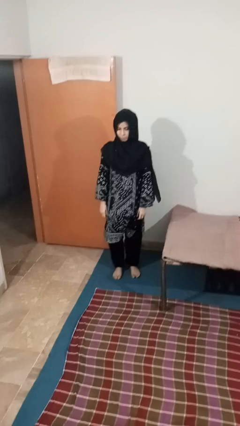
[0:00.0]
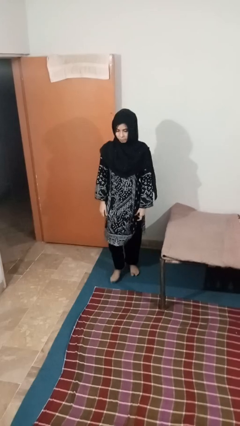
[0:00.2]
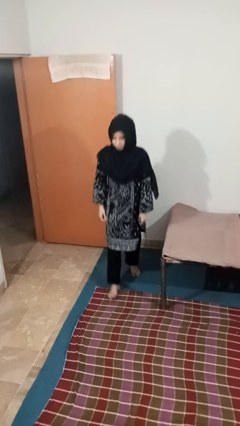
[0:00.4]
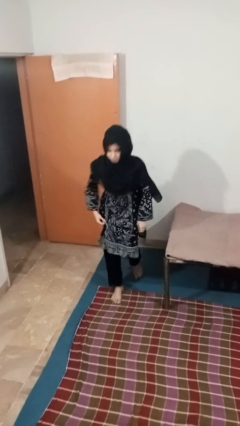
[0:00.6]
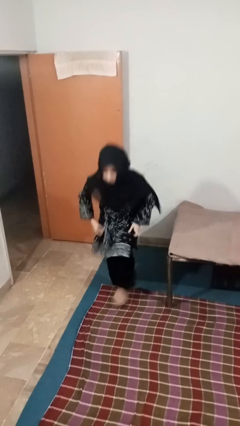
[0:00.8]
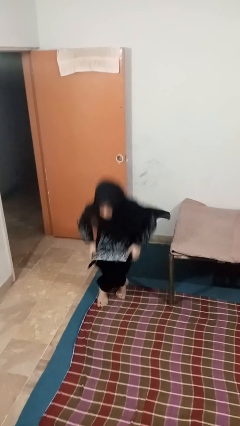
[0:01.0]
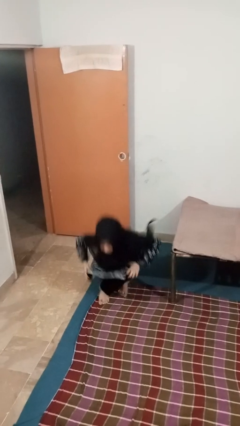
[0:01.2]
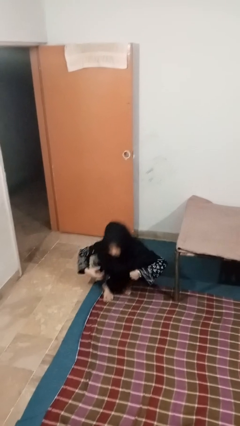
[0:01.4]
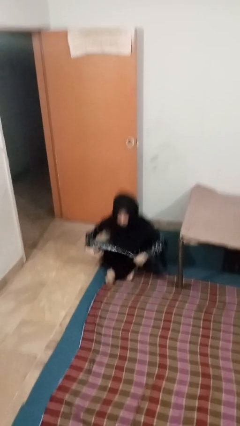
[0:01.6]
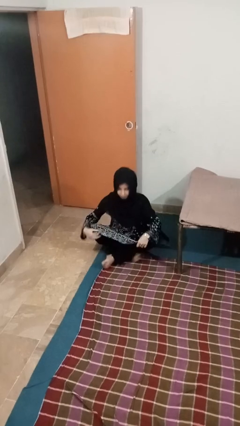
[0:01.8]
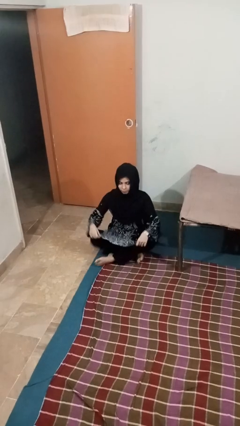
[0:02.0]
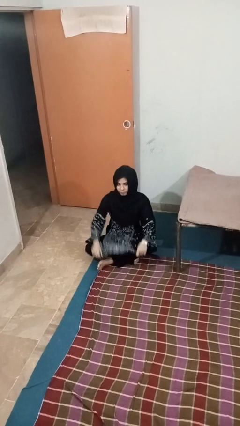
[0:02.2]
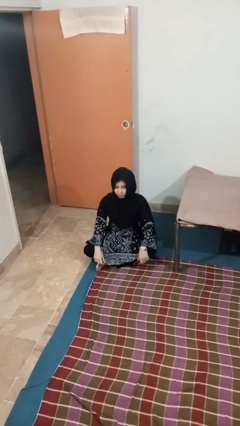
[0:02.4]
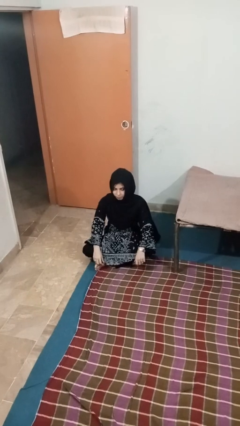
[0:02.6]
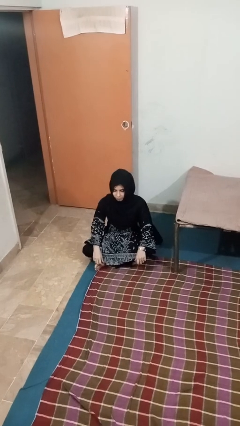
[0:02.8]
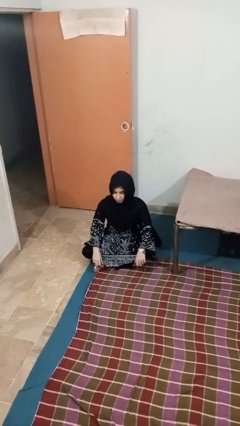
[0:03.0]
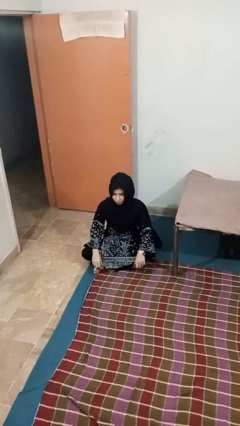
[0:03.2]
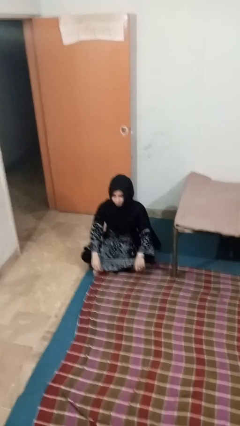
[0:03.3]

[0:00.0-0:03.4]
person sits crisscross

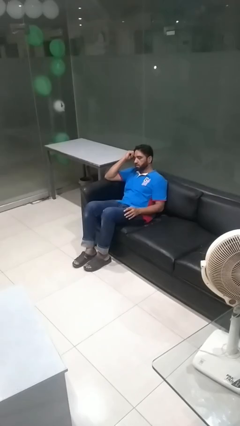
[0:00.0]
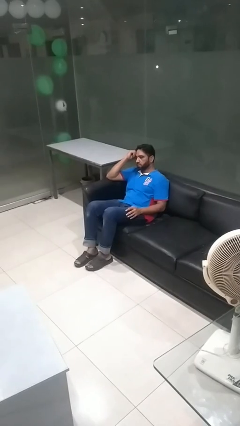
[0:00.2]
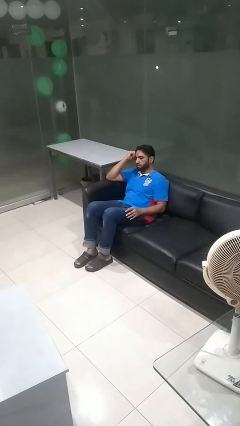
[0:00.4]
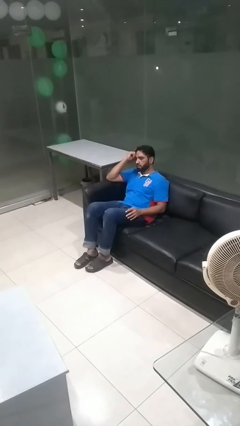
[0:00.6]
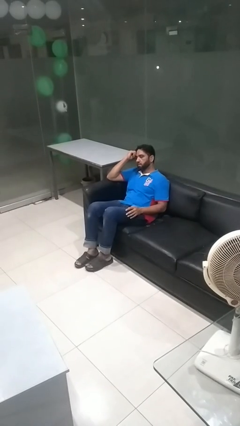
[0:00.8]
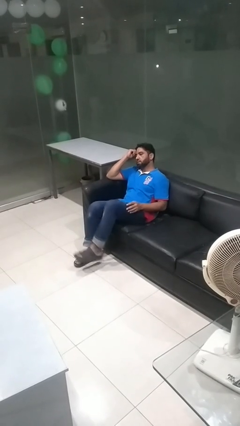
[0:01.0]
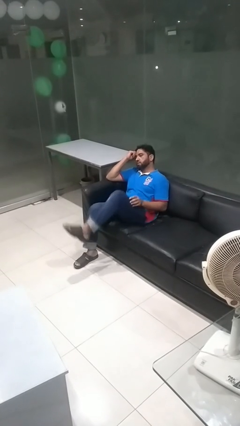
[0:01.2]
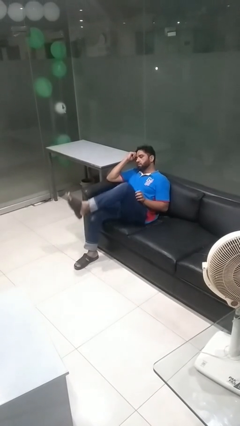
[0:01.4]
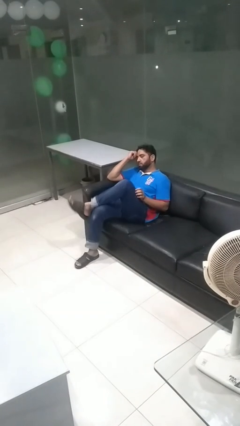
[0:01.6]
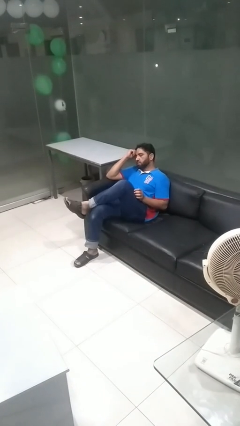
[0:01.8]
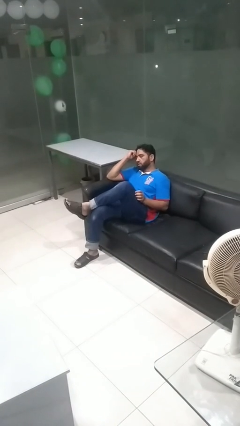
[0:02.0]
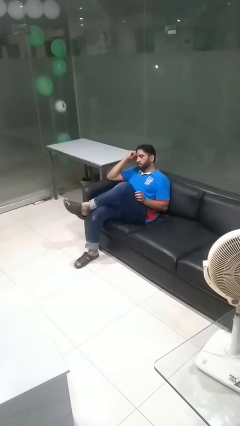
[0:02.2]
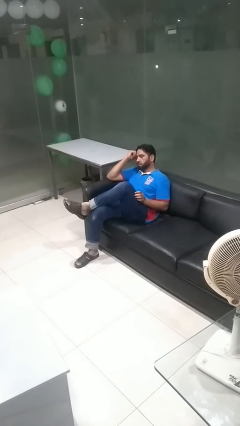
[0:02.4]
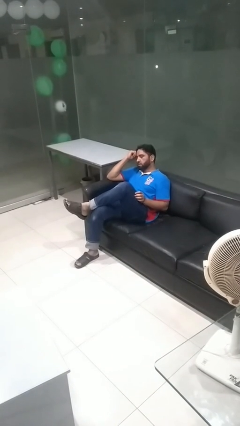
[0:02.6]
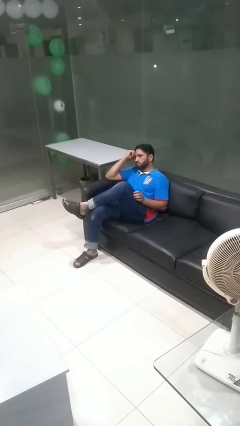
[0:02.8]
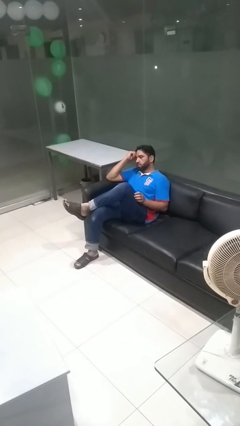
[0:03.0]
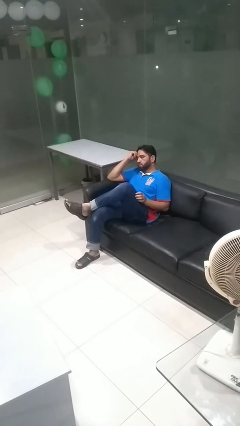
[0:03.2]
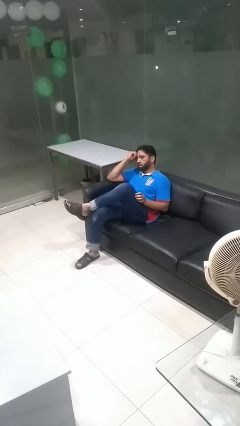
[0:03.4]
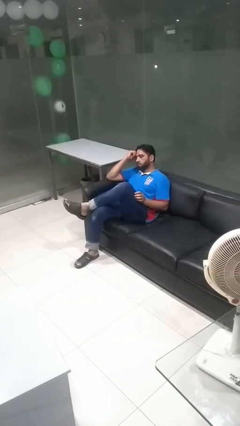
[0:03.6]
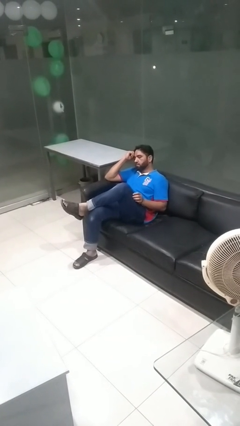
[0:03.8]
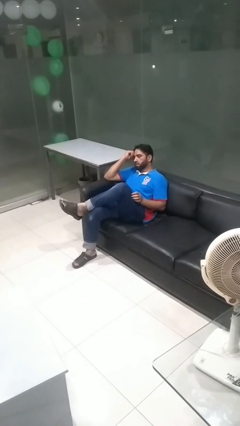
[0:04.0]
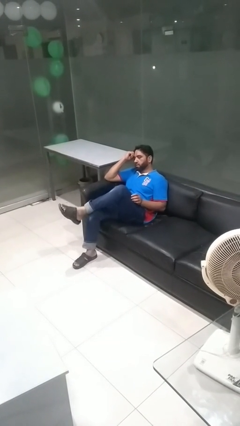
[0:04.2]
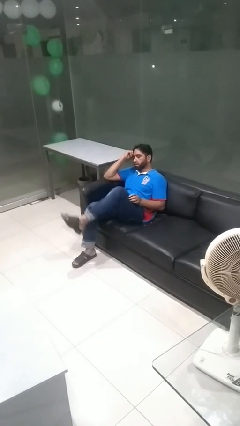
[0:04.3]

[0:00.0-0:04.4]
person crosses legs

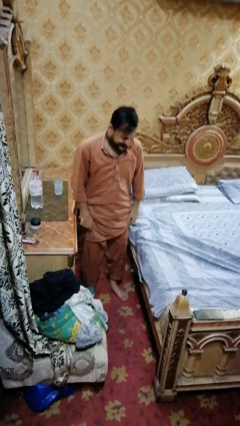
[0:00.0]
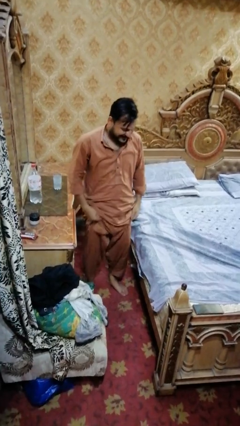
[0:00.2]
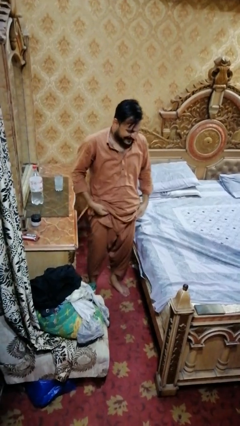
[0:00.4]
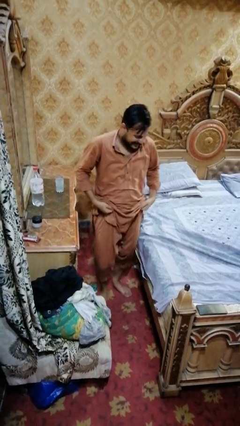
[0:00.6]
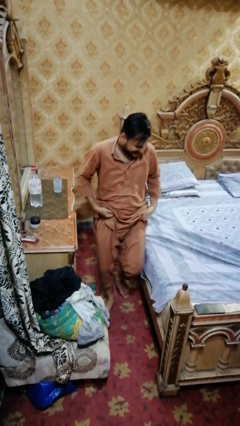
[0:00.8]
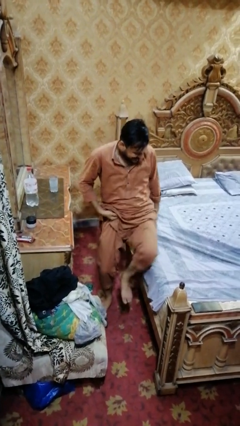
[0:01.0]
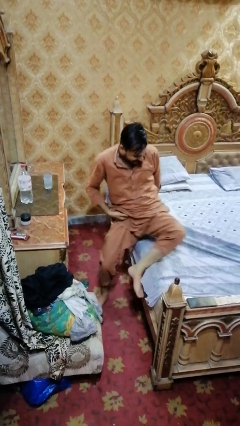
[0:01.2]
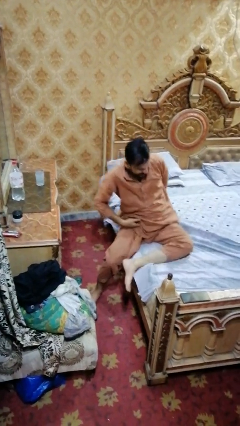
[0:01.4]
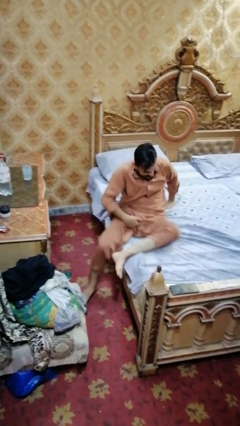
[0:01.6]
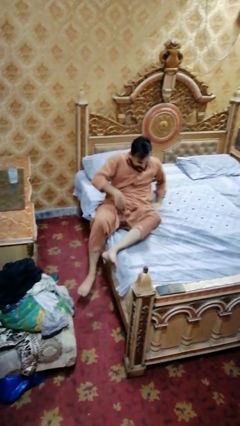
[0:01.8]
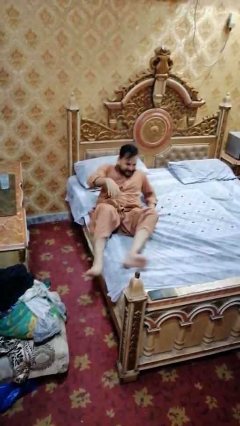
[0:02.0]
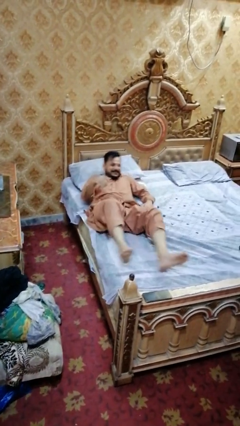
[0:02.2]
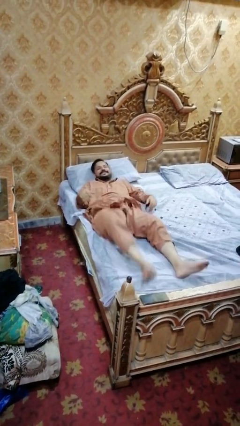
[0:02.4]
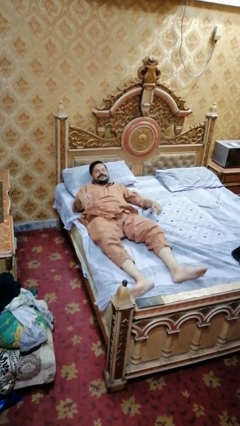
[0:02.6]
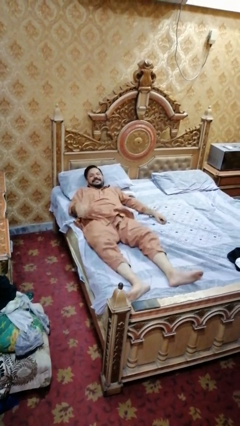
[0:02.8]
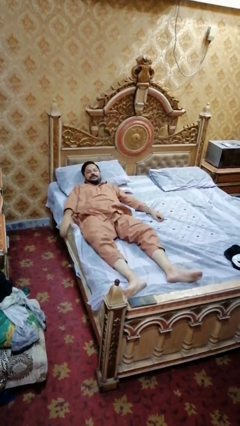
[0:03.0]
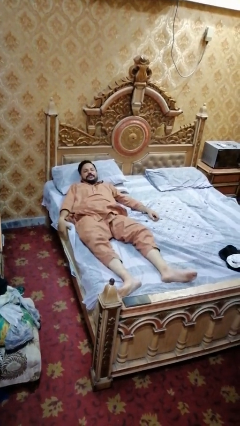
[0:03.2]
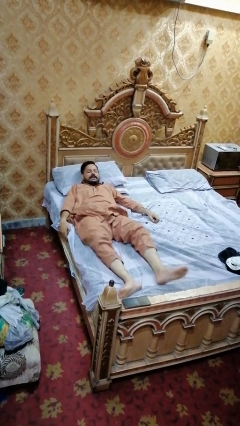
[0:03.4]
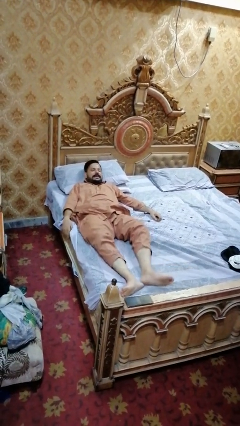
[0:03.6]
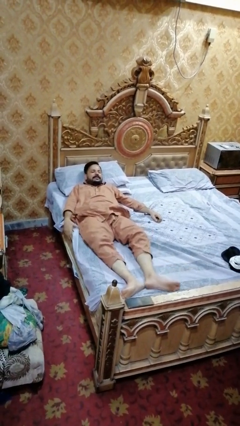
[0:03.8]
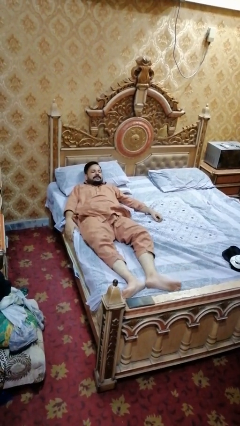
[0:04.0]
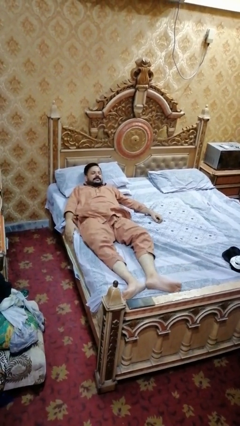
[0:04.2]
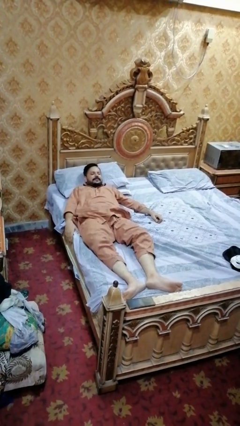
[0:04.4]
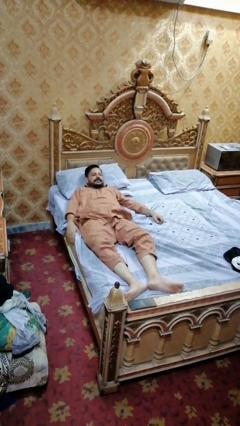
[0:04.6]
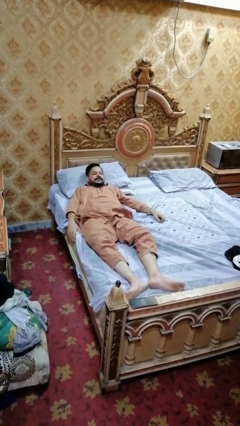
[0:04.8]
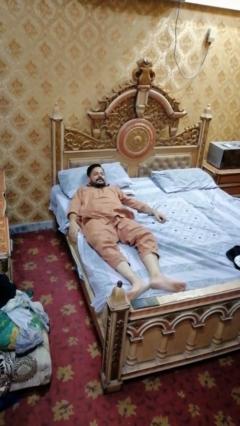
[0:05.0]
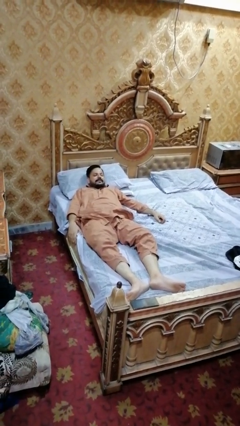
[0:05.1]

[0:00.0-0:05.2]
person lies down on bed

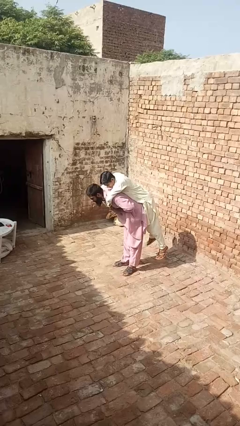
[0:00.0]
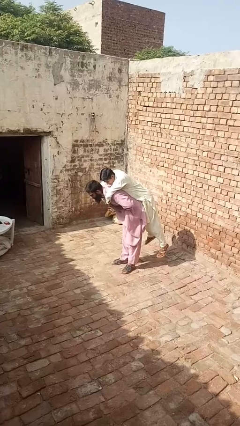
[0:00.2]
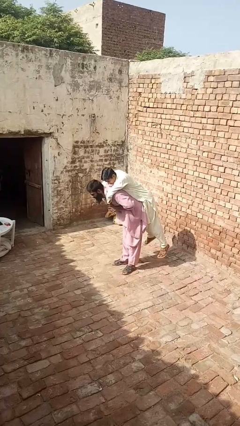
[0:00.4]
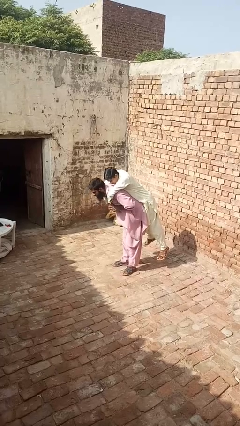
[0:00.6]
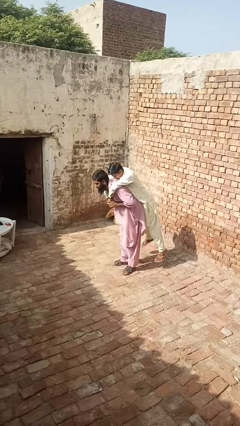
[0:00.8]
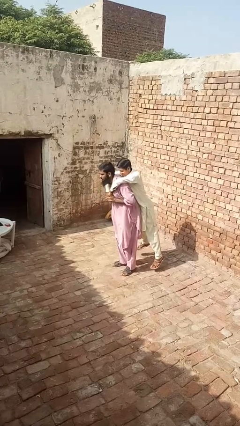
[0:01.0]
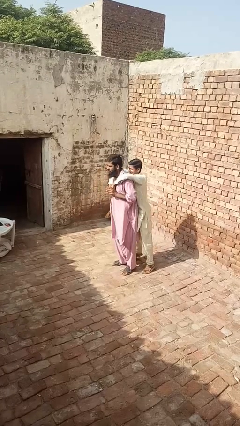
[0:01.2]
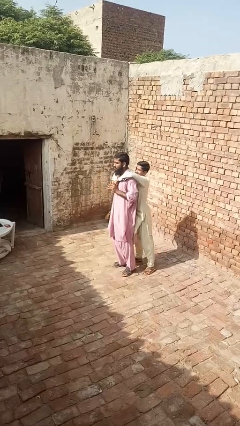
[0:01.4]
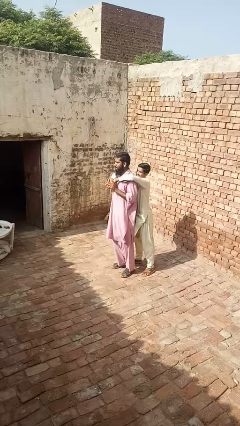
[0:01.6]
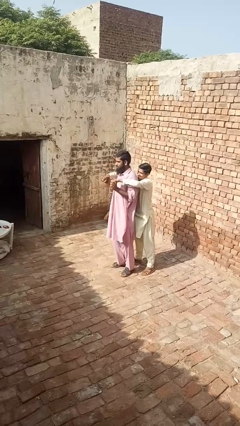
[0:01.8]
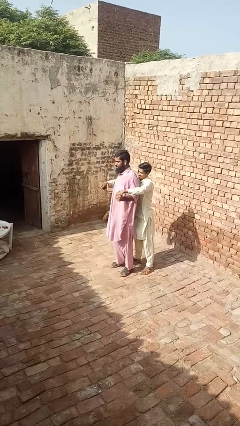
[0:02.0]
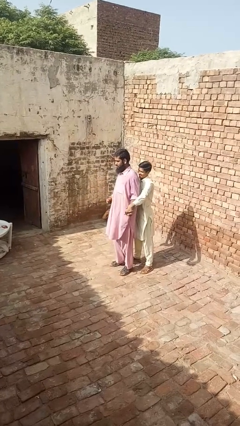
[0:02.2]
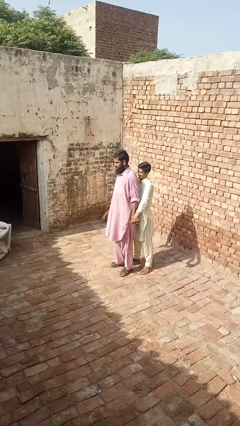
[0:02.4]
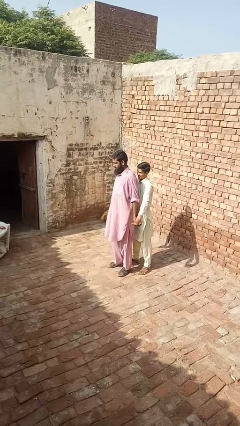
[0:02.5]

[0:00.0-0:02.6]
person puts down person

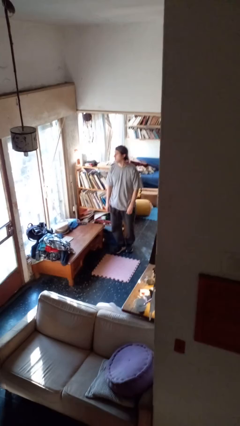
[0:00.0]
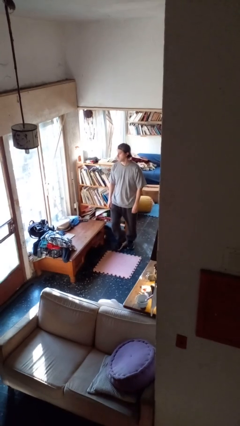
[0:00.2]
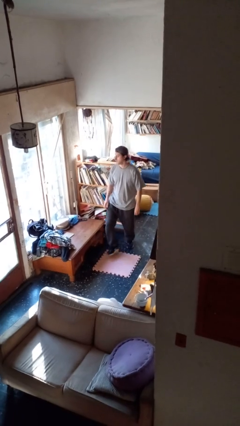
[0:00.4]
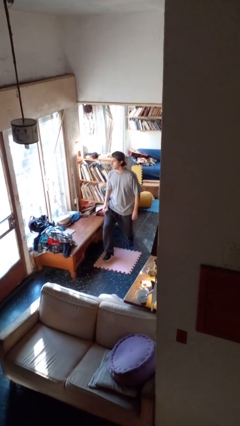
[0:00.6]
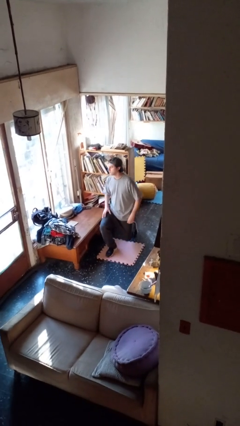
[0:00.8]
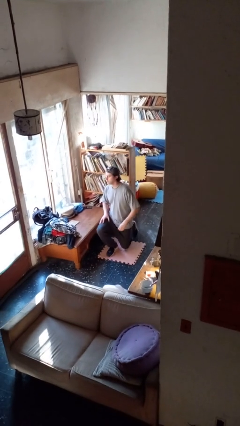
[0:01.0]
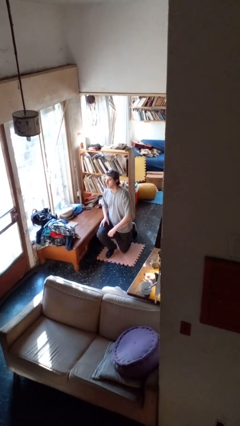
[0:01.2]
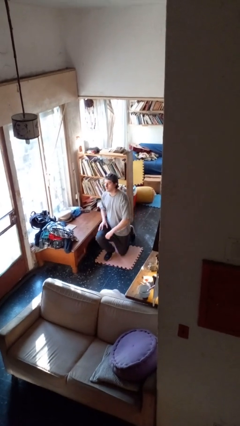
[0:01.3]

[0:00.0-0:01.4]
person kneels

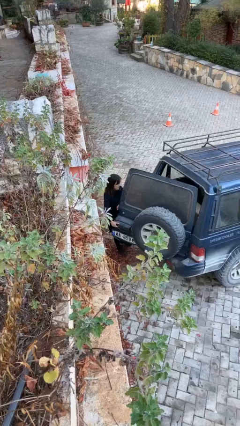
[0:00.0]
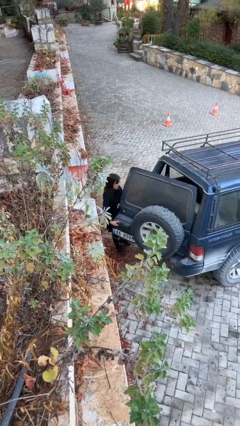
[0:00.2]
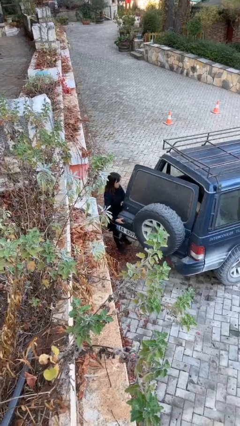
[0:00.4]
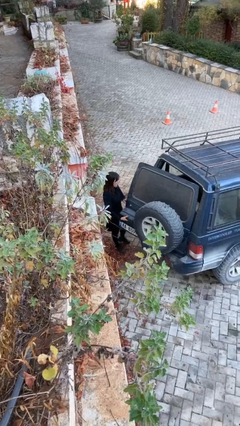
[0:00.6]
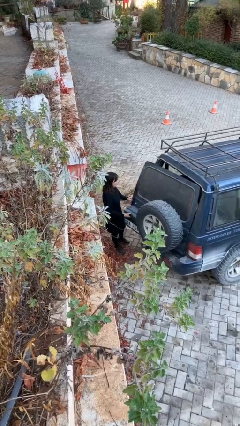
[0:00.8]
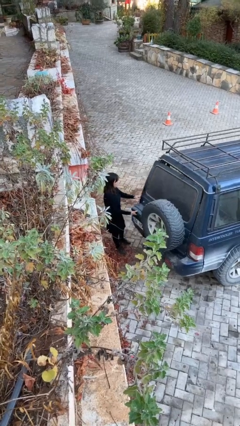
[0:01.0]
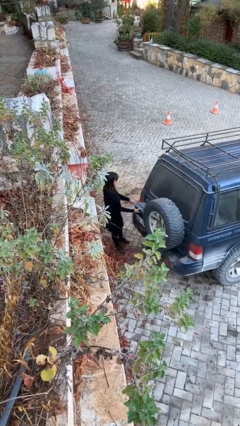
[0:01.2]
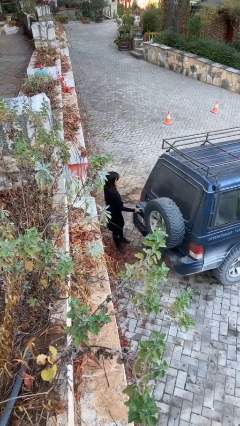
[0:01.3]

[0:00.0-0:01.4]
person closes car trunk
